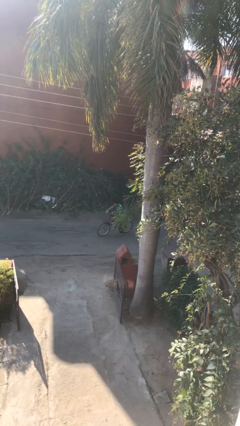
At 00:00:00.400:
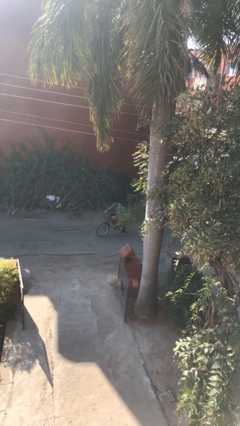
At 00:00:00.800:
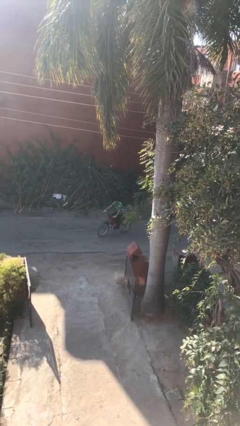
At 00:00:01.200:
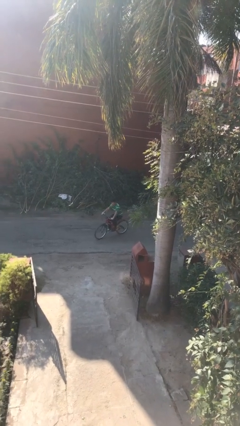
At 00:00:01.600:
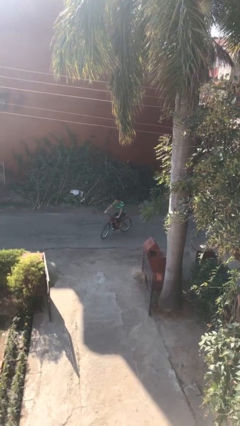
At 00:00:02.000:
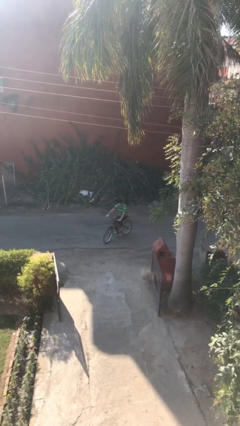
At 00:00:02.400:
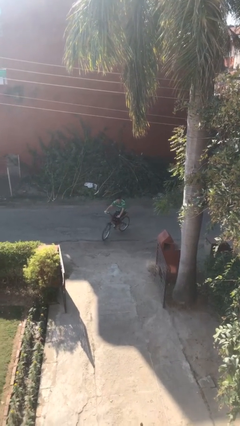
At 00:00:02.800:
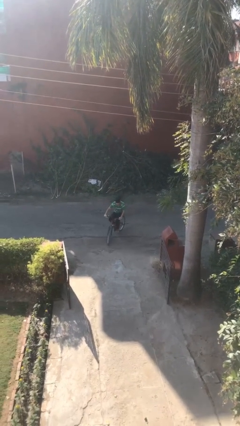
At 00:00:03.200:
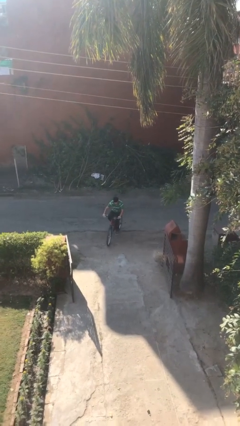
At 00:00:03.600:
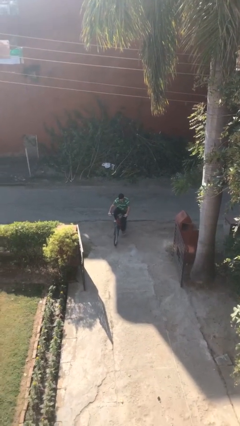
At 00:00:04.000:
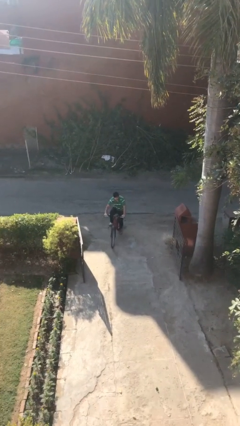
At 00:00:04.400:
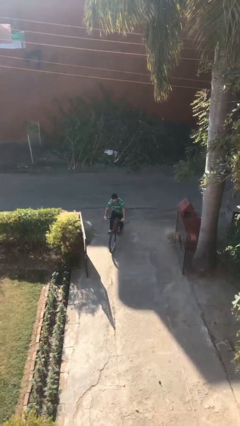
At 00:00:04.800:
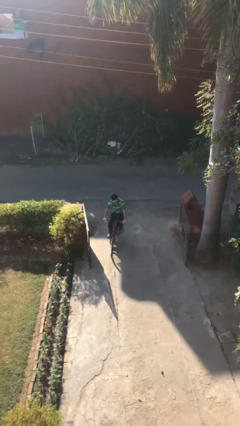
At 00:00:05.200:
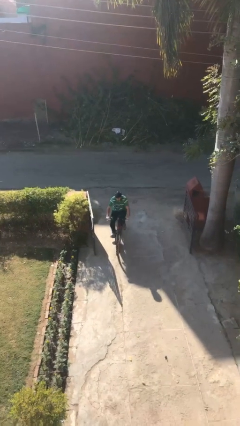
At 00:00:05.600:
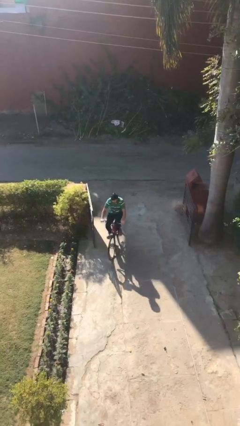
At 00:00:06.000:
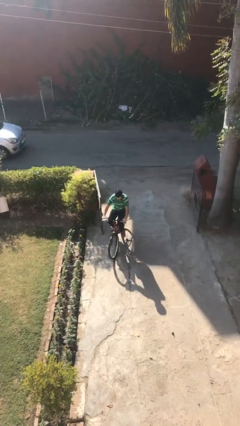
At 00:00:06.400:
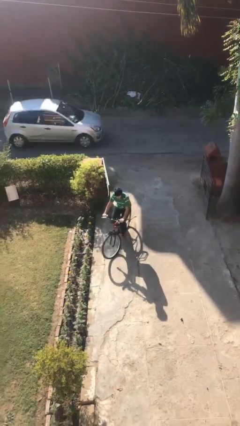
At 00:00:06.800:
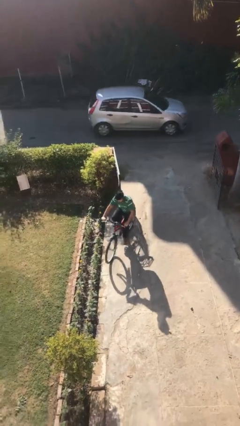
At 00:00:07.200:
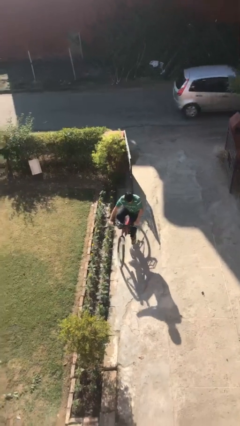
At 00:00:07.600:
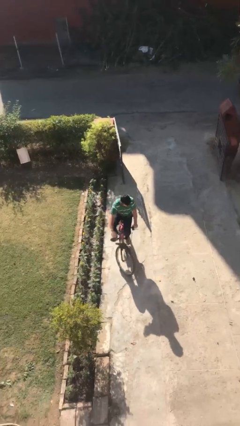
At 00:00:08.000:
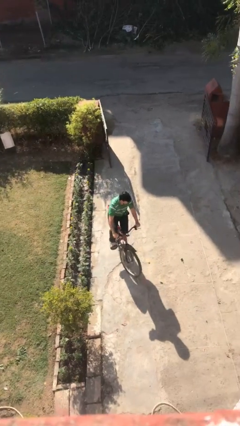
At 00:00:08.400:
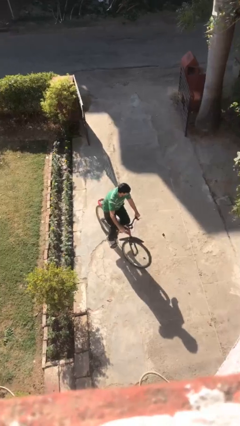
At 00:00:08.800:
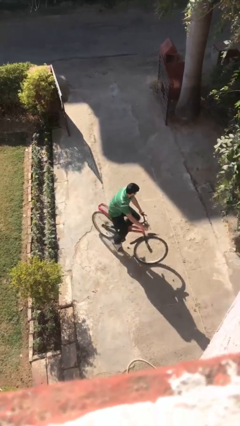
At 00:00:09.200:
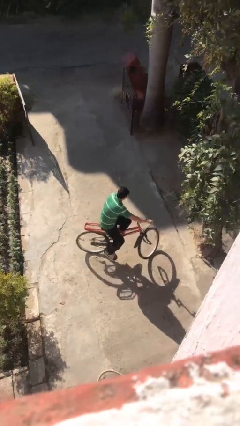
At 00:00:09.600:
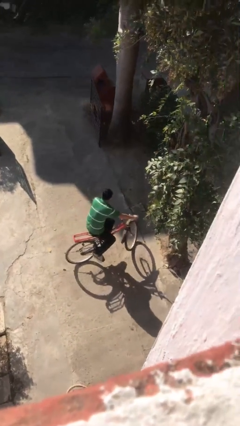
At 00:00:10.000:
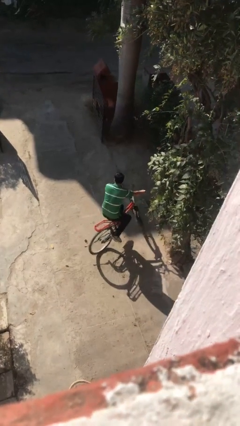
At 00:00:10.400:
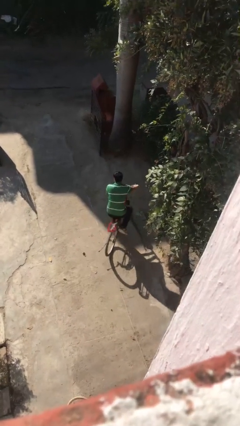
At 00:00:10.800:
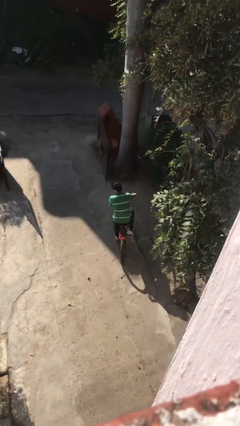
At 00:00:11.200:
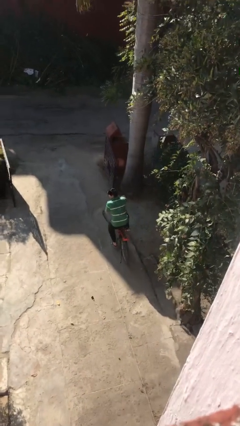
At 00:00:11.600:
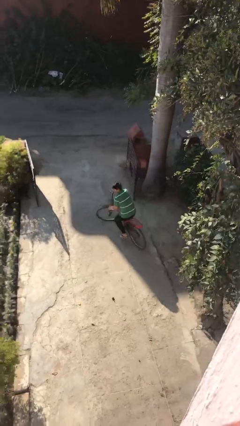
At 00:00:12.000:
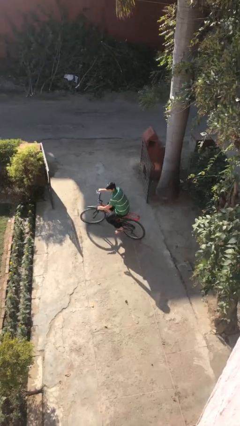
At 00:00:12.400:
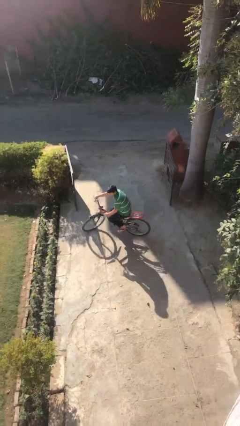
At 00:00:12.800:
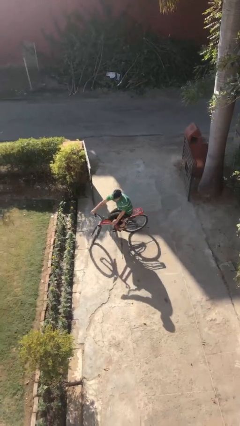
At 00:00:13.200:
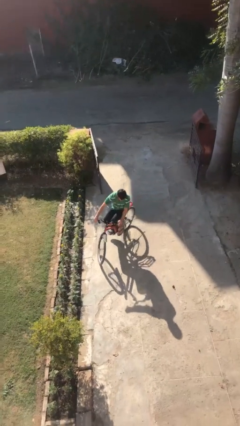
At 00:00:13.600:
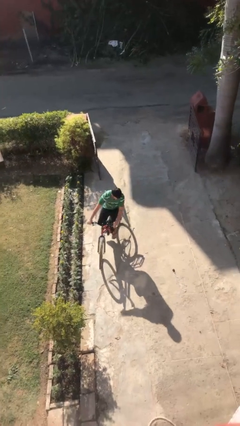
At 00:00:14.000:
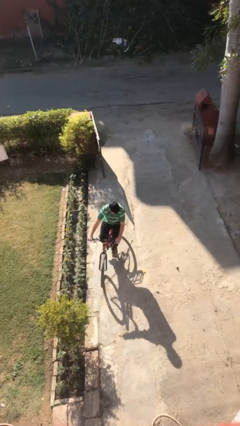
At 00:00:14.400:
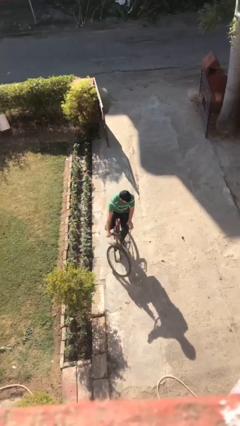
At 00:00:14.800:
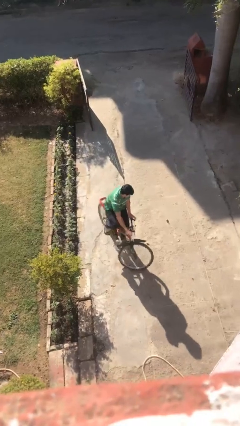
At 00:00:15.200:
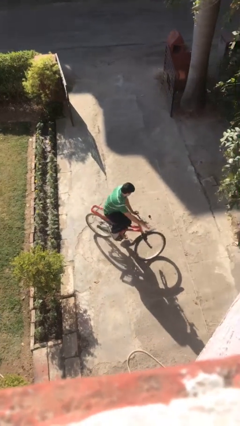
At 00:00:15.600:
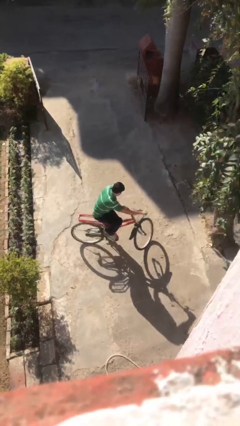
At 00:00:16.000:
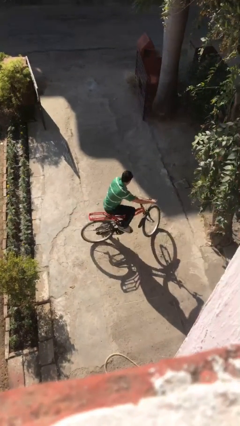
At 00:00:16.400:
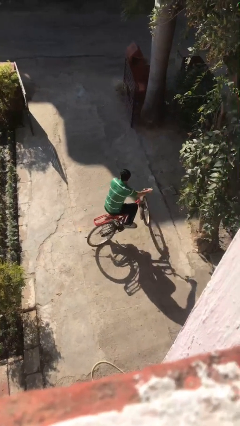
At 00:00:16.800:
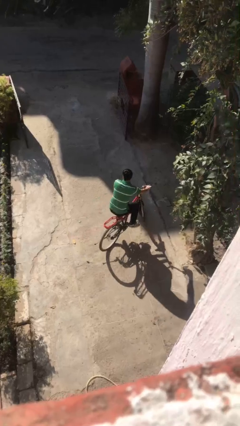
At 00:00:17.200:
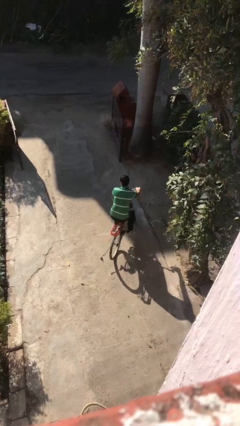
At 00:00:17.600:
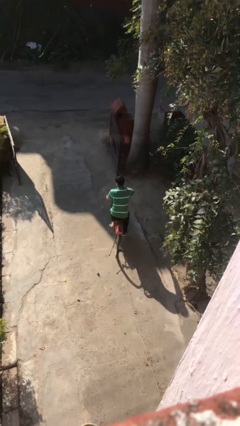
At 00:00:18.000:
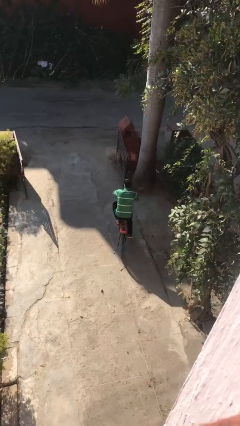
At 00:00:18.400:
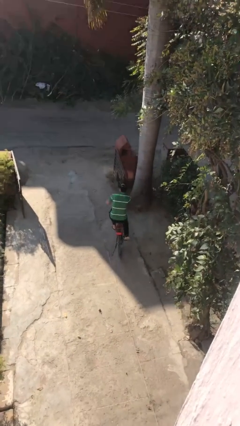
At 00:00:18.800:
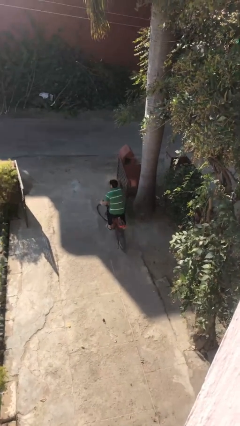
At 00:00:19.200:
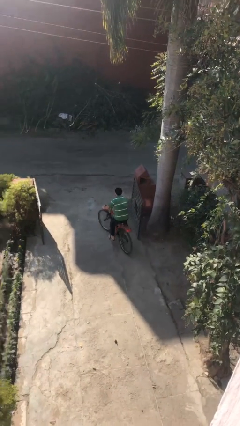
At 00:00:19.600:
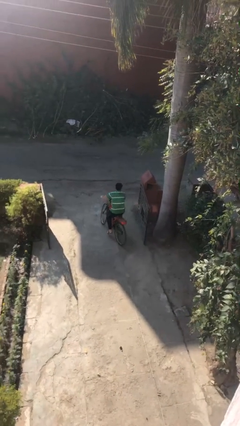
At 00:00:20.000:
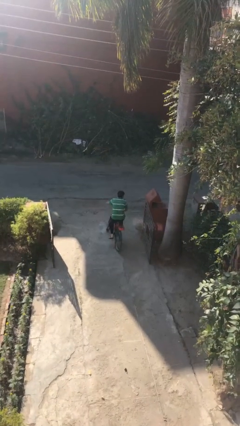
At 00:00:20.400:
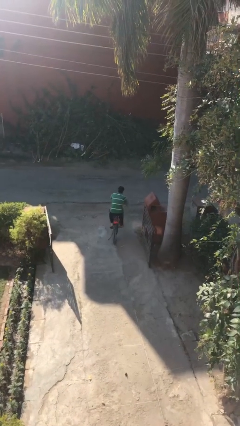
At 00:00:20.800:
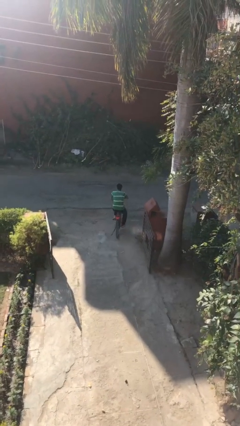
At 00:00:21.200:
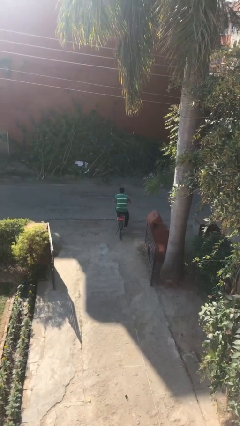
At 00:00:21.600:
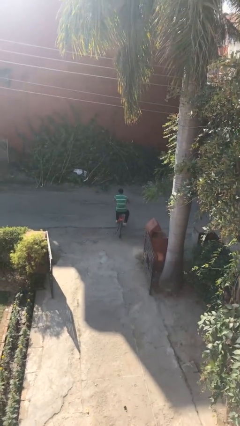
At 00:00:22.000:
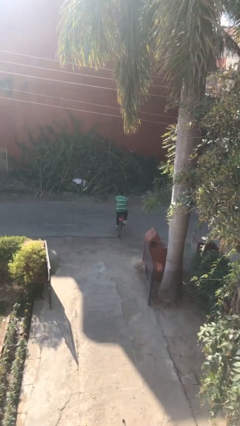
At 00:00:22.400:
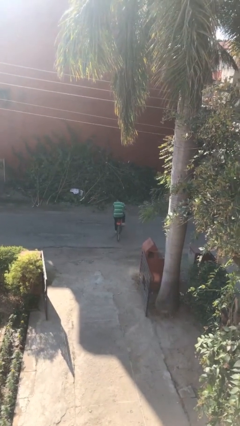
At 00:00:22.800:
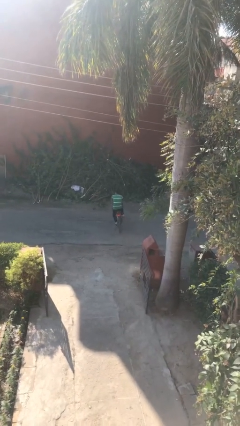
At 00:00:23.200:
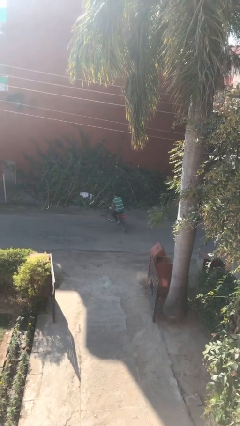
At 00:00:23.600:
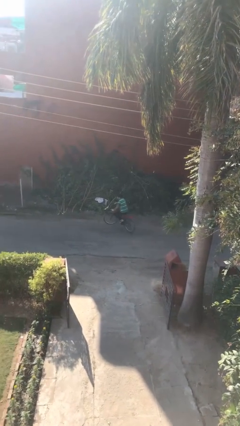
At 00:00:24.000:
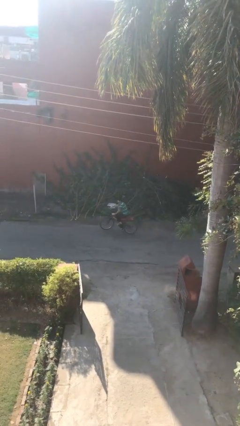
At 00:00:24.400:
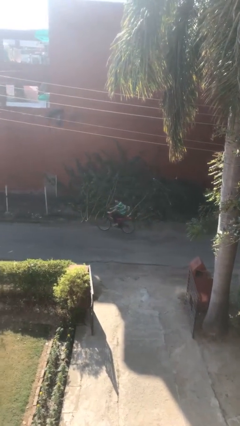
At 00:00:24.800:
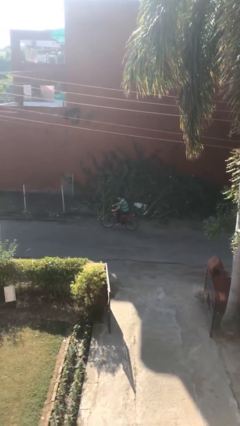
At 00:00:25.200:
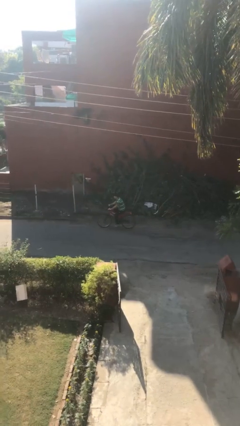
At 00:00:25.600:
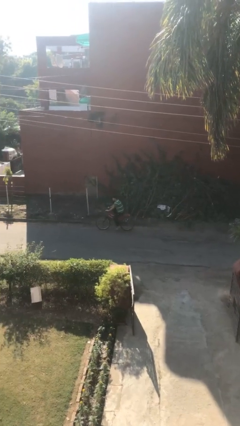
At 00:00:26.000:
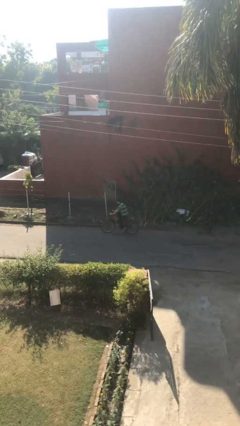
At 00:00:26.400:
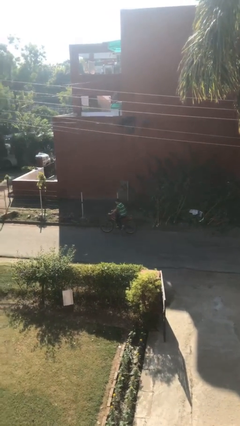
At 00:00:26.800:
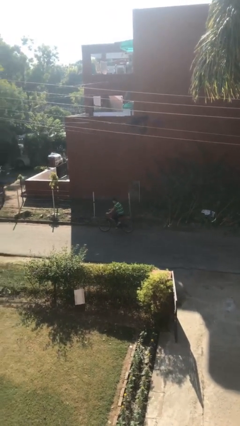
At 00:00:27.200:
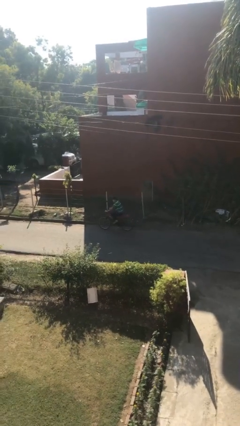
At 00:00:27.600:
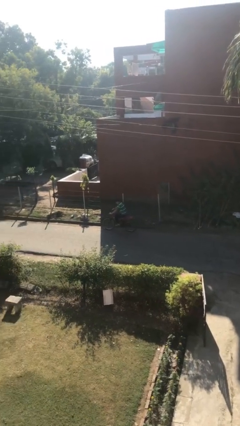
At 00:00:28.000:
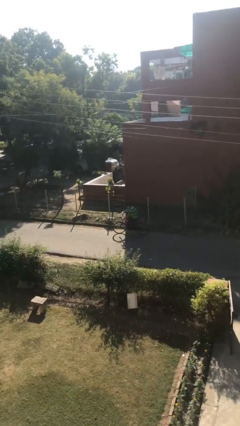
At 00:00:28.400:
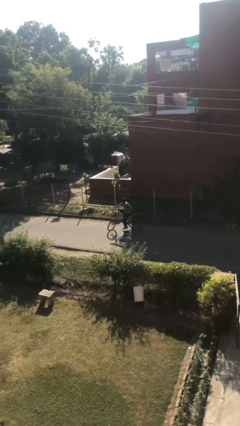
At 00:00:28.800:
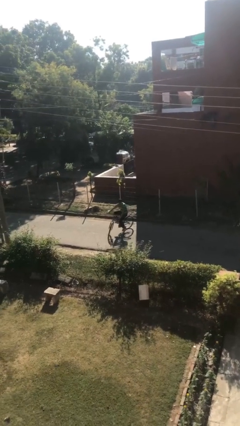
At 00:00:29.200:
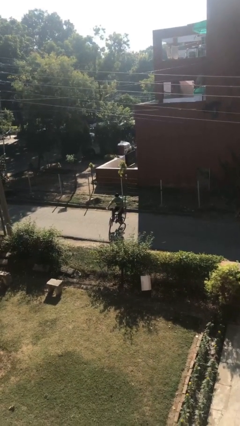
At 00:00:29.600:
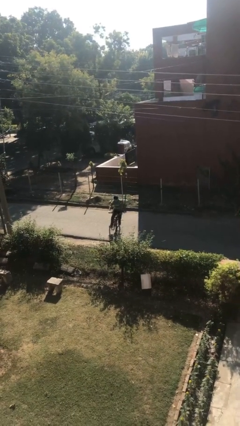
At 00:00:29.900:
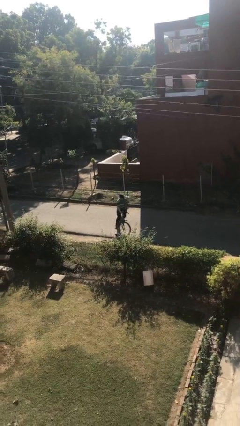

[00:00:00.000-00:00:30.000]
person rides bicycle

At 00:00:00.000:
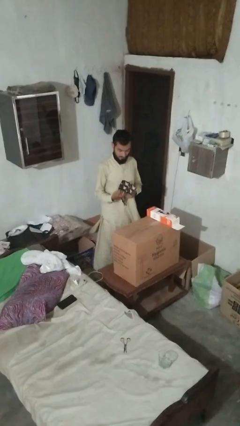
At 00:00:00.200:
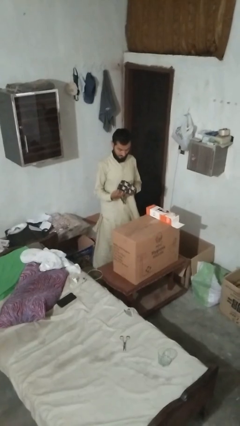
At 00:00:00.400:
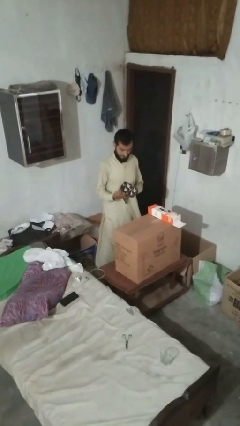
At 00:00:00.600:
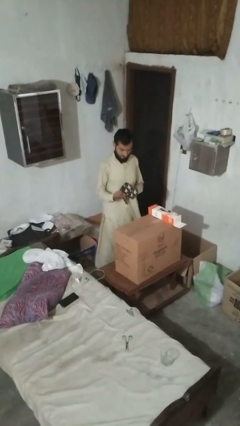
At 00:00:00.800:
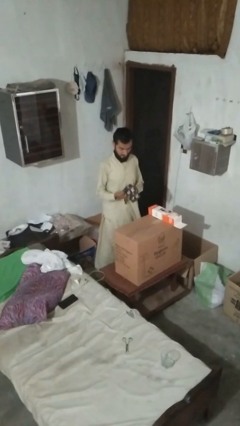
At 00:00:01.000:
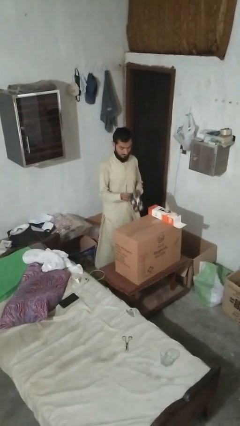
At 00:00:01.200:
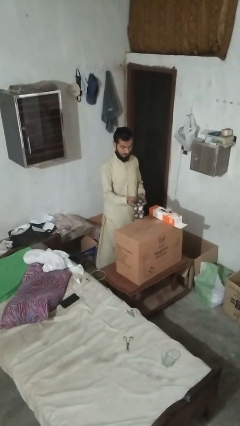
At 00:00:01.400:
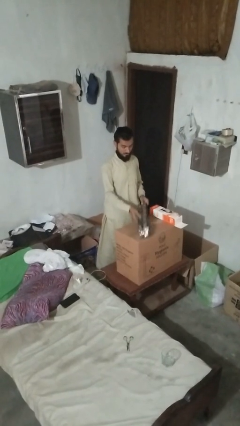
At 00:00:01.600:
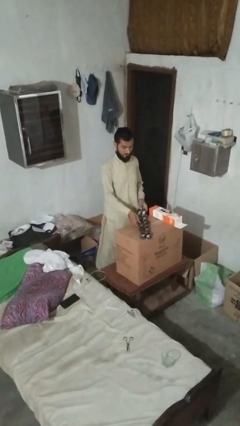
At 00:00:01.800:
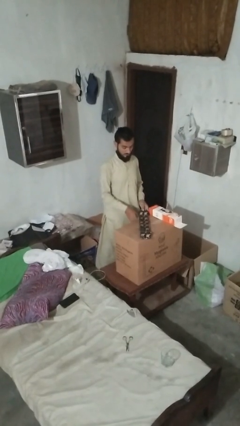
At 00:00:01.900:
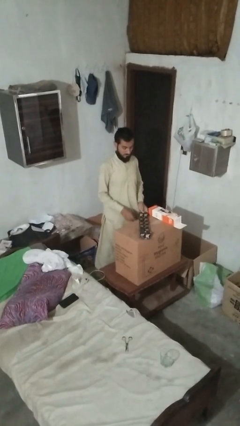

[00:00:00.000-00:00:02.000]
person puts down object on countertop

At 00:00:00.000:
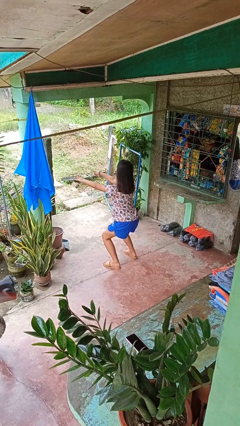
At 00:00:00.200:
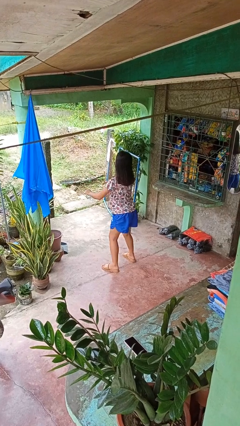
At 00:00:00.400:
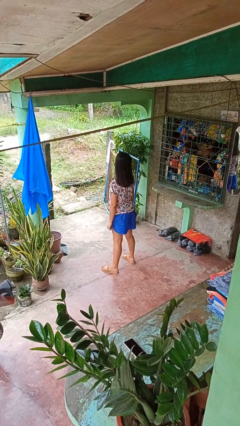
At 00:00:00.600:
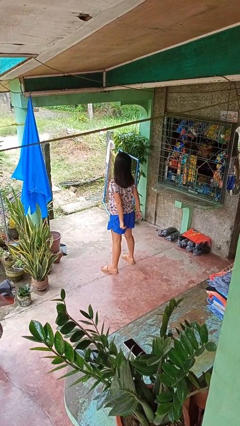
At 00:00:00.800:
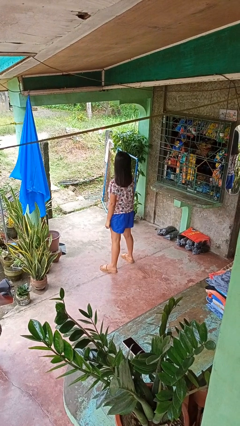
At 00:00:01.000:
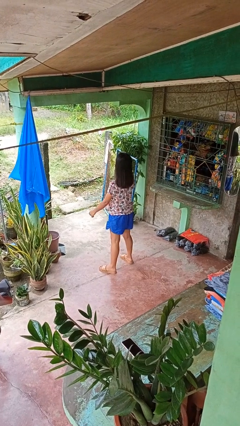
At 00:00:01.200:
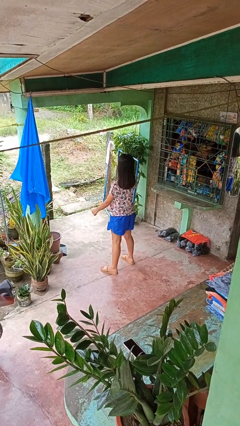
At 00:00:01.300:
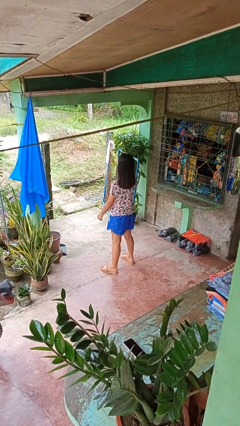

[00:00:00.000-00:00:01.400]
person stands up
